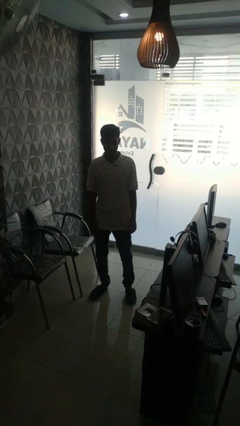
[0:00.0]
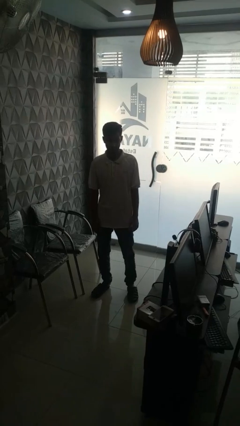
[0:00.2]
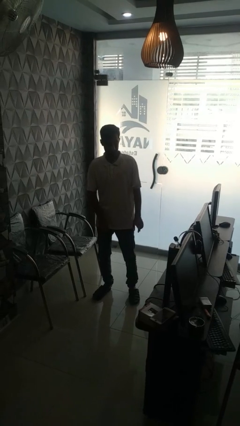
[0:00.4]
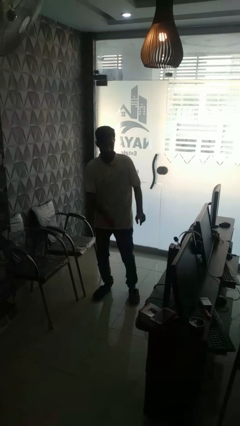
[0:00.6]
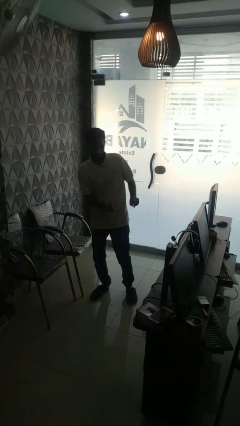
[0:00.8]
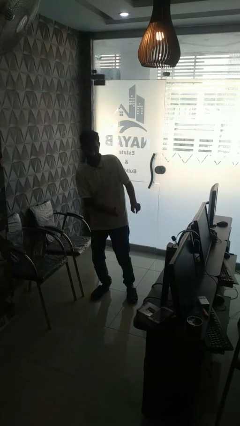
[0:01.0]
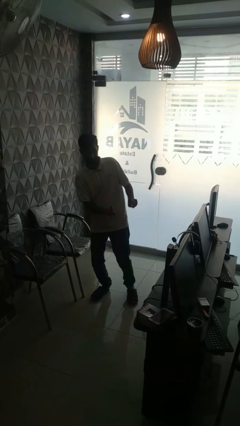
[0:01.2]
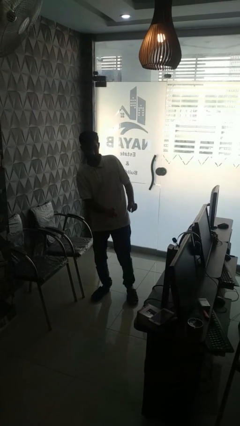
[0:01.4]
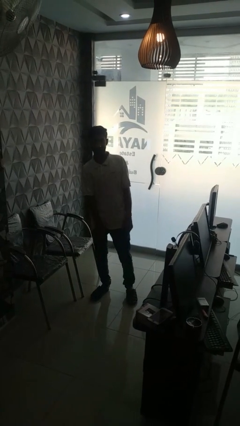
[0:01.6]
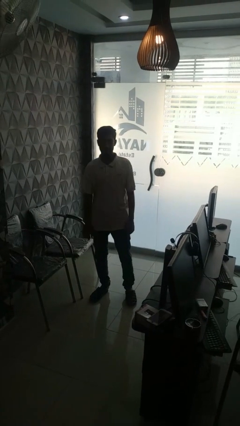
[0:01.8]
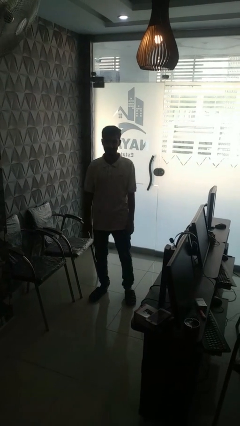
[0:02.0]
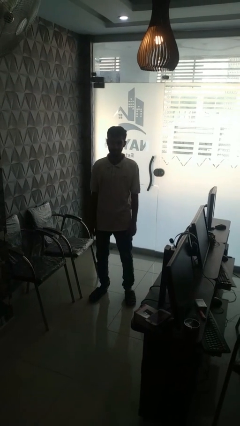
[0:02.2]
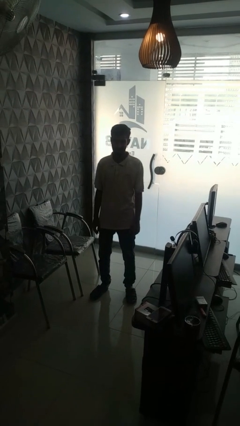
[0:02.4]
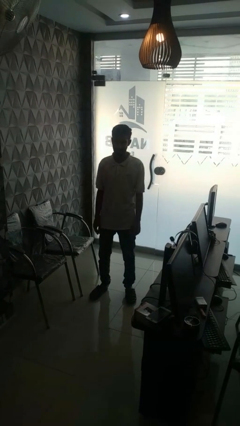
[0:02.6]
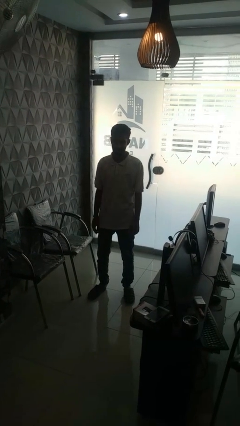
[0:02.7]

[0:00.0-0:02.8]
person dances in place

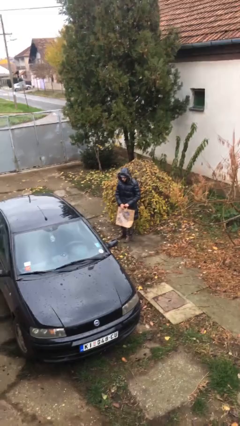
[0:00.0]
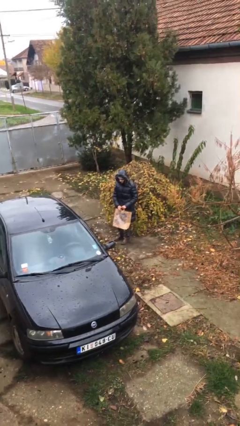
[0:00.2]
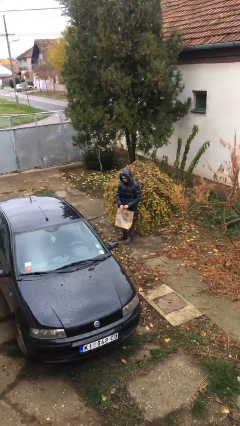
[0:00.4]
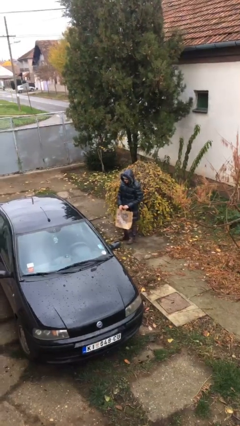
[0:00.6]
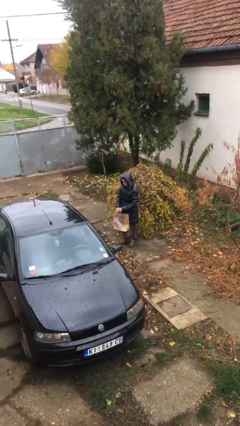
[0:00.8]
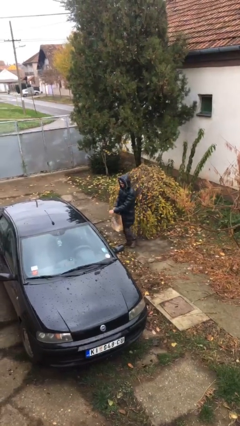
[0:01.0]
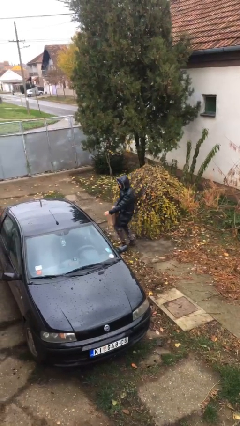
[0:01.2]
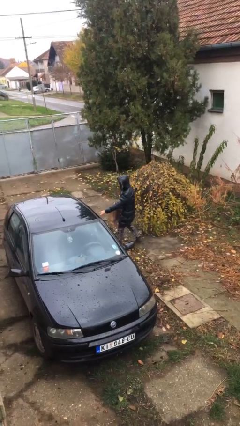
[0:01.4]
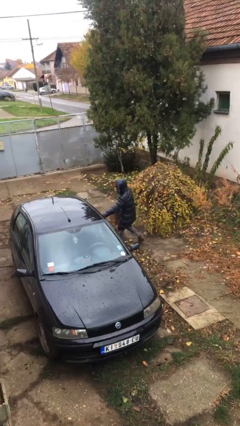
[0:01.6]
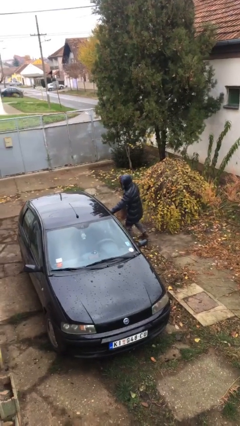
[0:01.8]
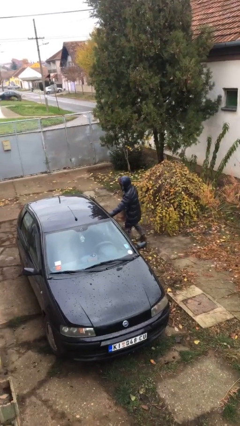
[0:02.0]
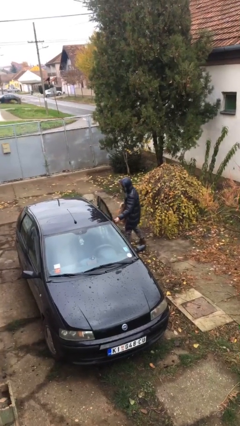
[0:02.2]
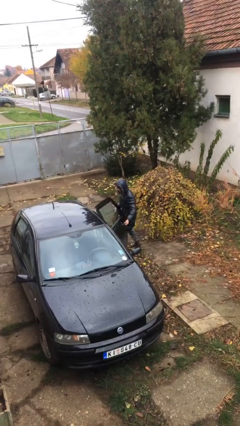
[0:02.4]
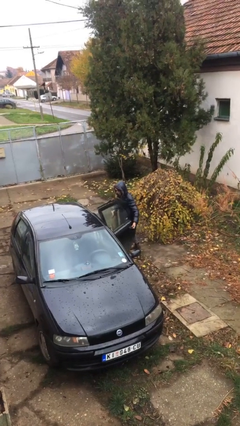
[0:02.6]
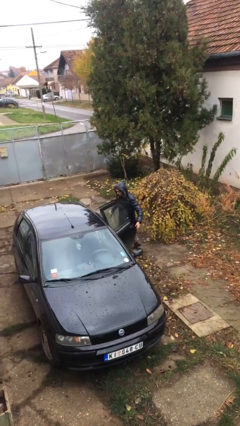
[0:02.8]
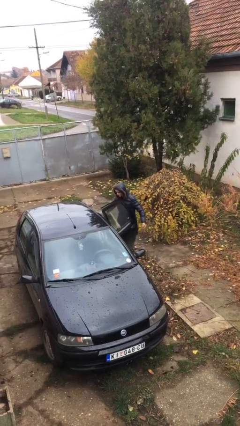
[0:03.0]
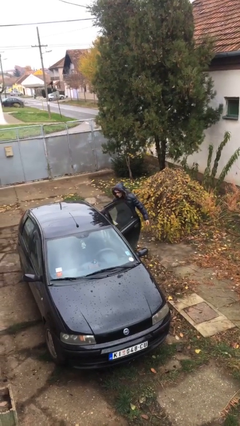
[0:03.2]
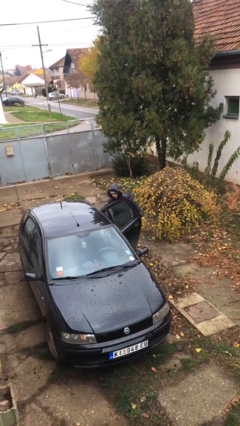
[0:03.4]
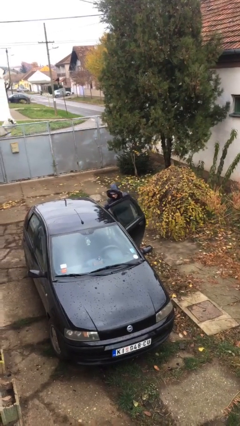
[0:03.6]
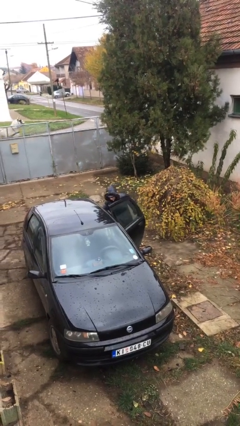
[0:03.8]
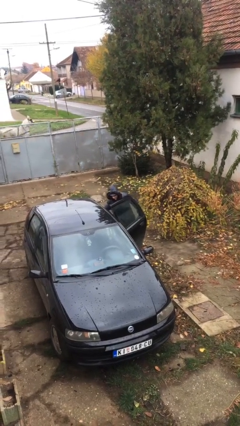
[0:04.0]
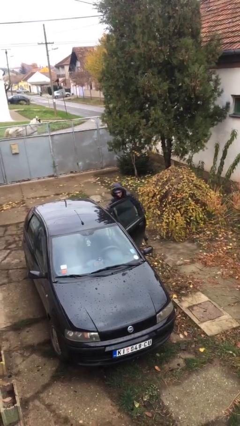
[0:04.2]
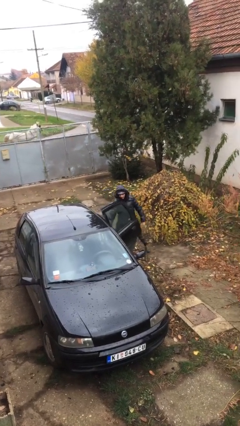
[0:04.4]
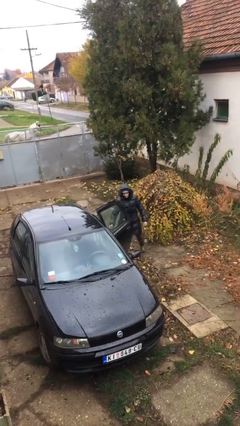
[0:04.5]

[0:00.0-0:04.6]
person loads car

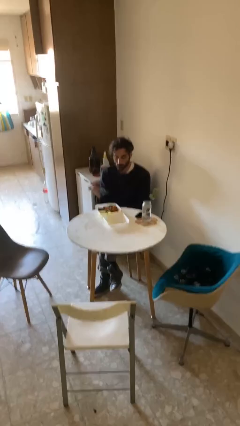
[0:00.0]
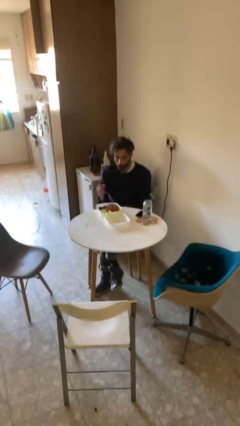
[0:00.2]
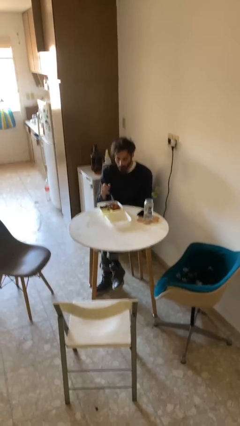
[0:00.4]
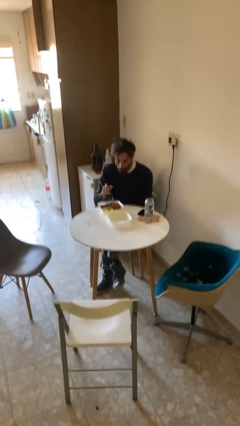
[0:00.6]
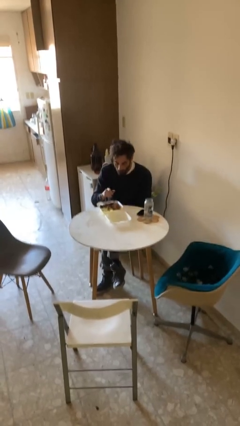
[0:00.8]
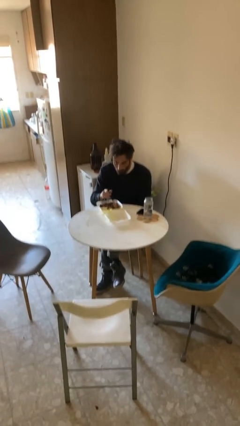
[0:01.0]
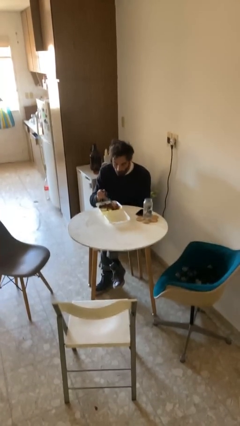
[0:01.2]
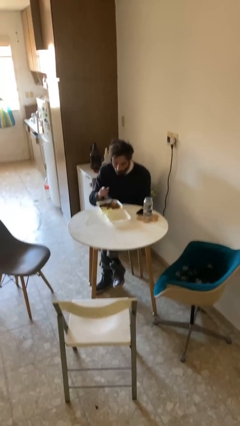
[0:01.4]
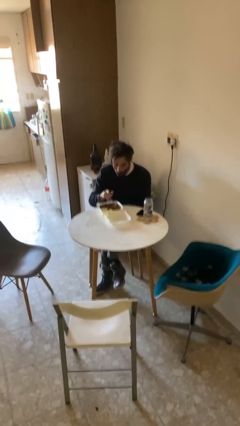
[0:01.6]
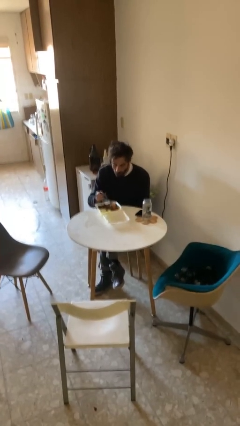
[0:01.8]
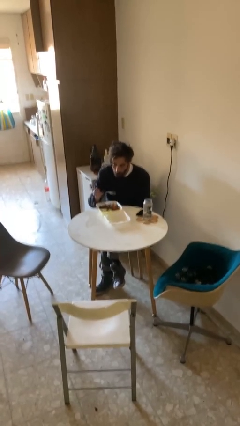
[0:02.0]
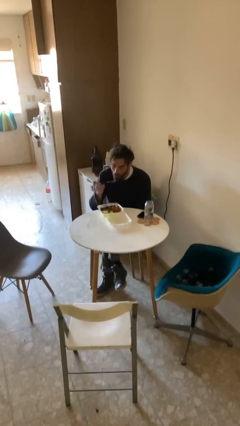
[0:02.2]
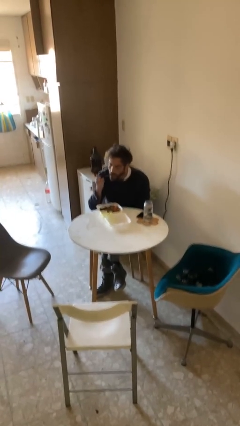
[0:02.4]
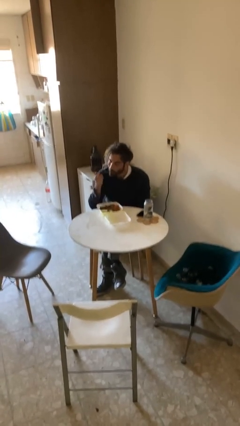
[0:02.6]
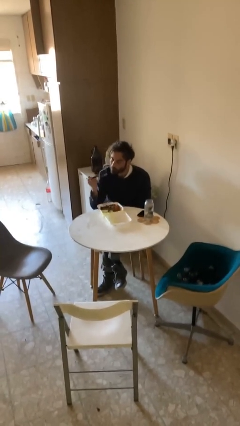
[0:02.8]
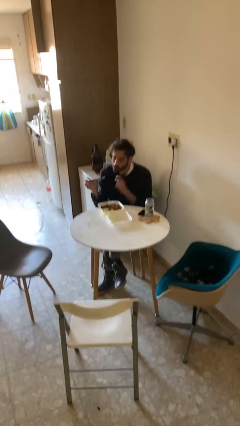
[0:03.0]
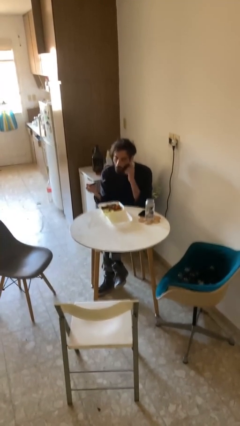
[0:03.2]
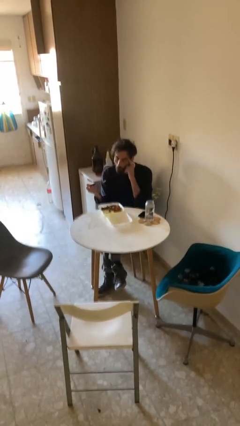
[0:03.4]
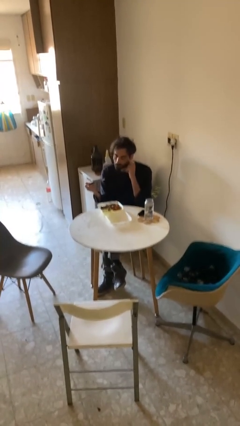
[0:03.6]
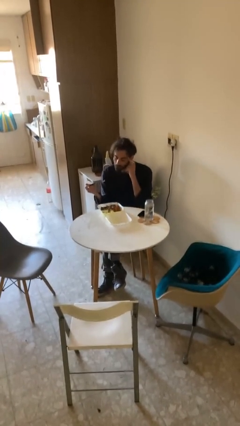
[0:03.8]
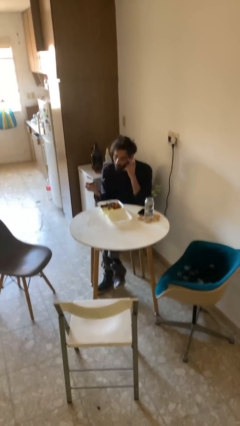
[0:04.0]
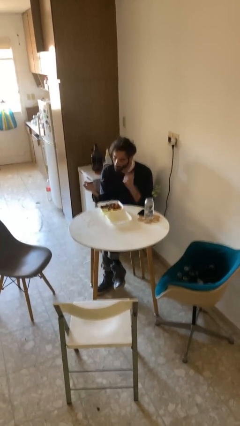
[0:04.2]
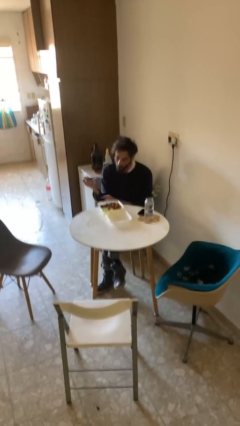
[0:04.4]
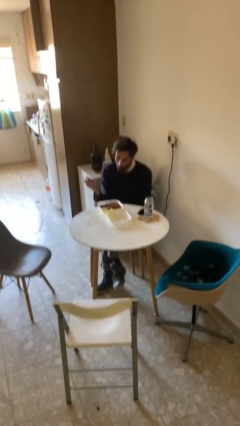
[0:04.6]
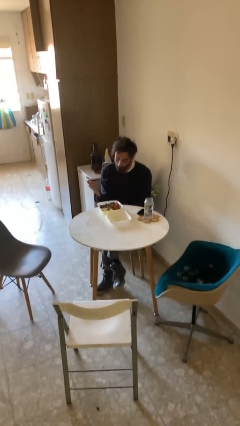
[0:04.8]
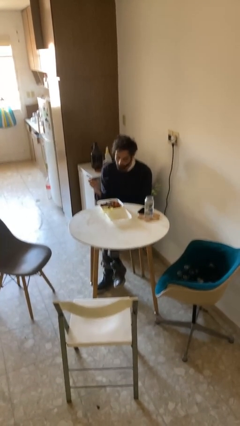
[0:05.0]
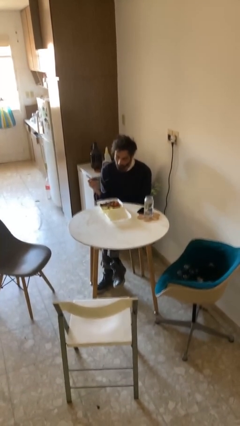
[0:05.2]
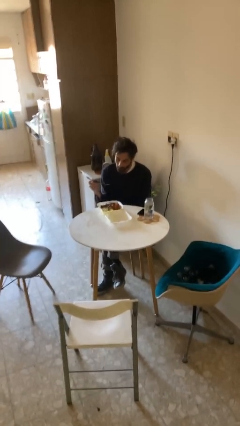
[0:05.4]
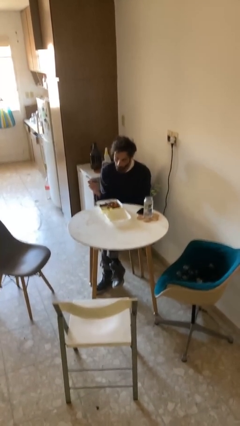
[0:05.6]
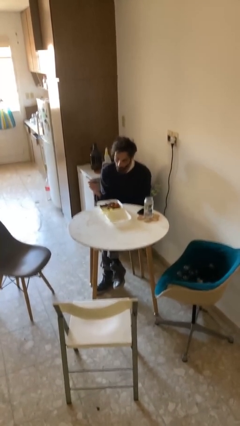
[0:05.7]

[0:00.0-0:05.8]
person eats with utensil

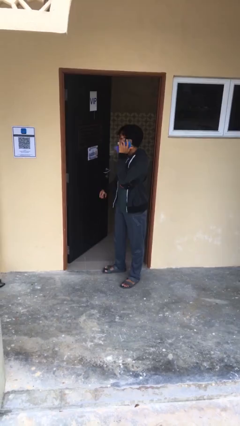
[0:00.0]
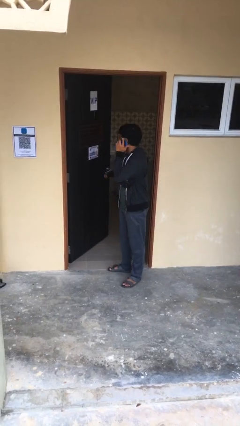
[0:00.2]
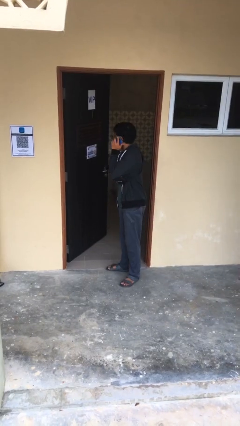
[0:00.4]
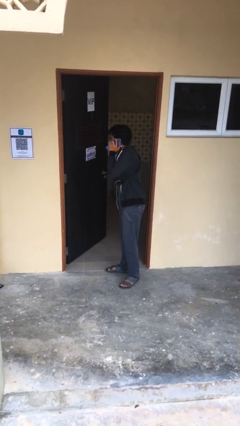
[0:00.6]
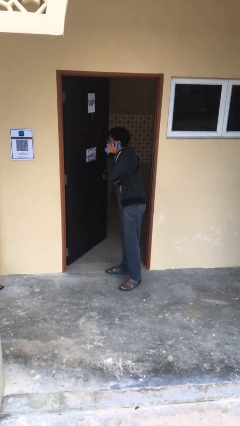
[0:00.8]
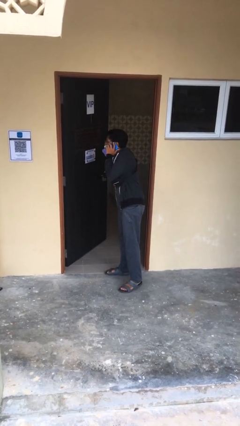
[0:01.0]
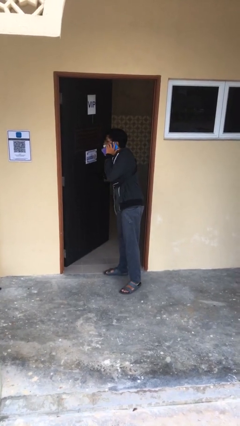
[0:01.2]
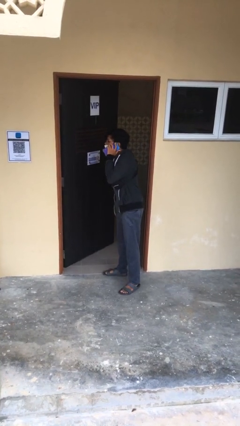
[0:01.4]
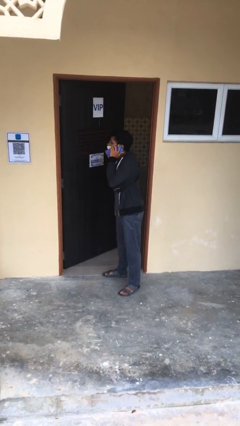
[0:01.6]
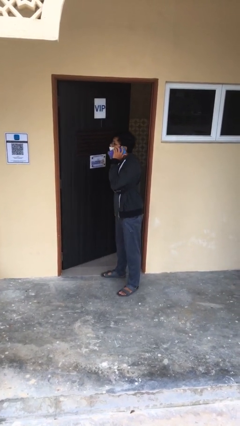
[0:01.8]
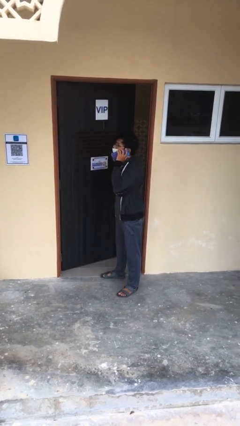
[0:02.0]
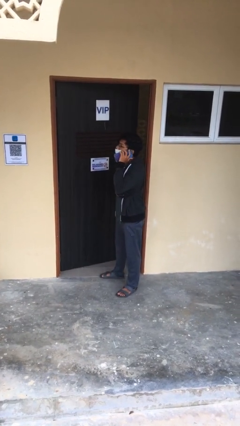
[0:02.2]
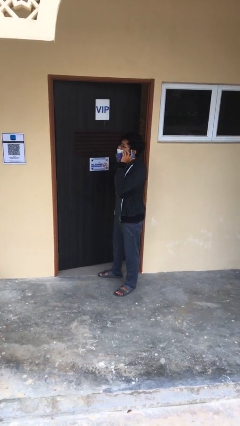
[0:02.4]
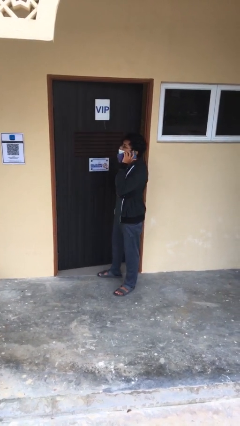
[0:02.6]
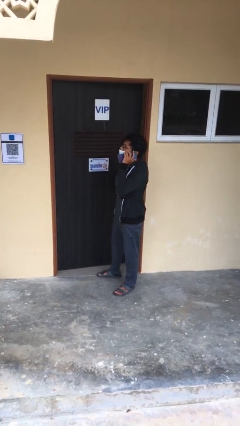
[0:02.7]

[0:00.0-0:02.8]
person closes facility door

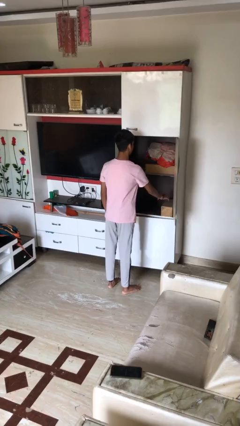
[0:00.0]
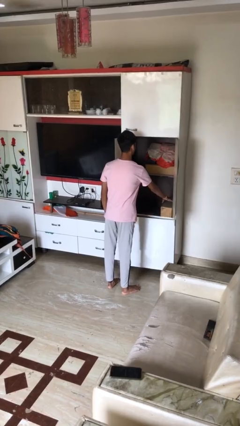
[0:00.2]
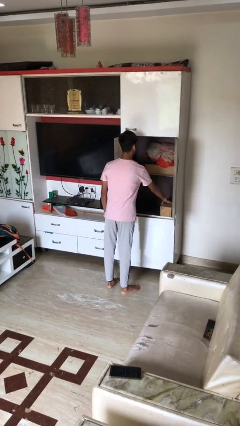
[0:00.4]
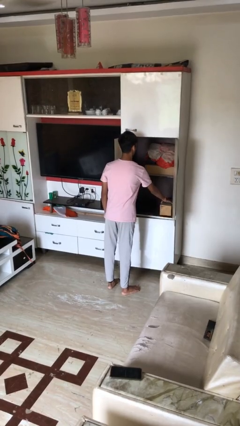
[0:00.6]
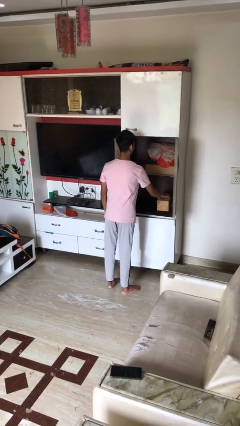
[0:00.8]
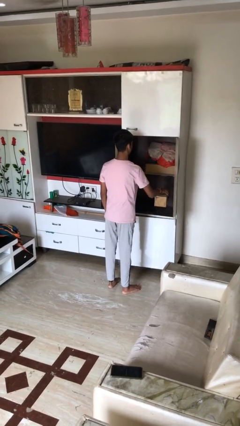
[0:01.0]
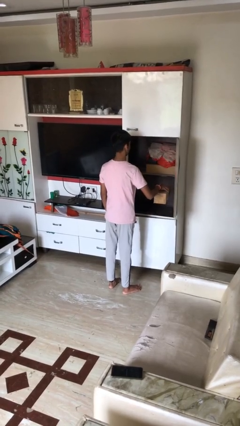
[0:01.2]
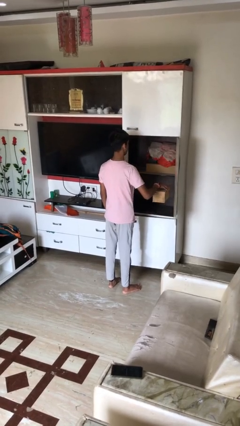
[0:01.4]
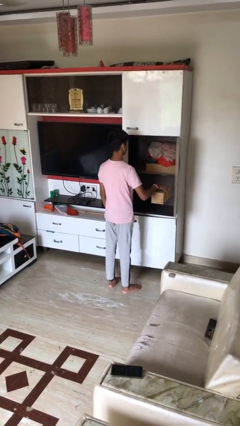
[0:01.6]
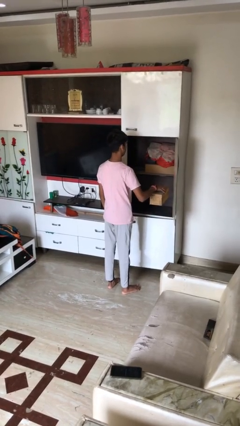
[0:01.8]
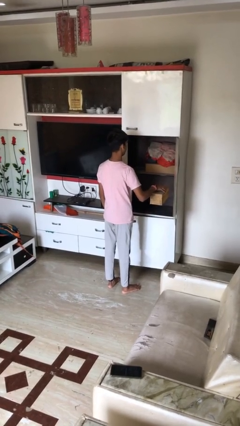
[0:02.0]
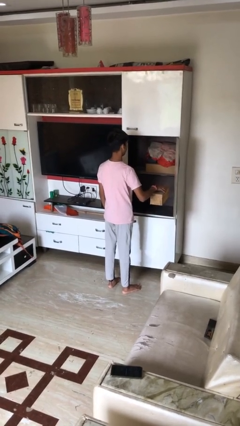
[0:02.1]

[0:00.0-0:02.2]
person picks up object from cabinet
